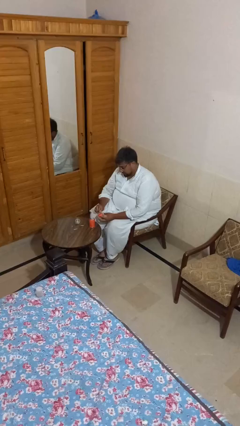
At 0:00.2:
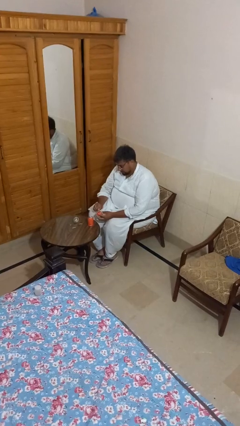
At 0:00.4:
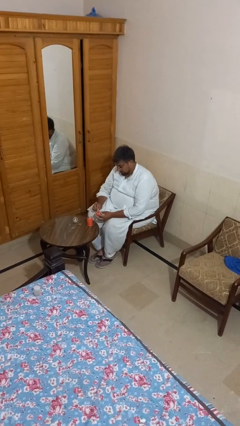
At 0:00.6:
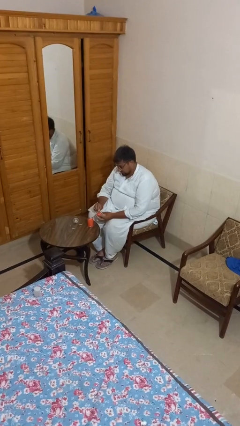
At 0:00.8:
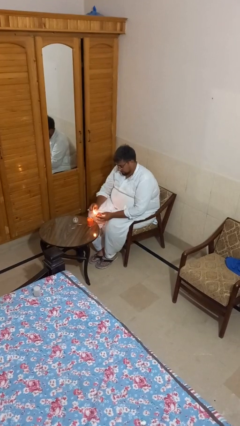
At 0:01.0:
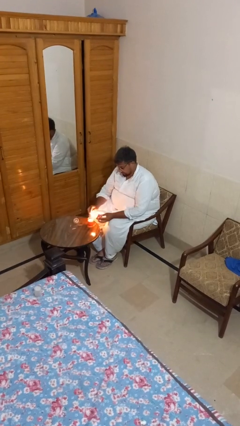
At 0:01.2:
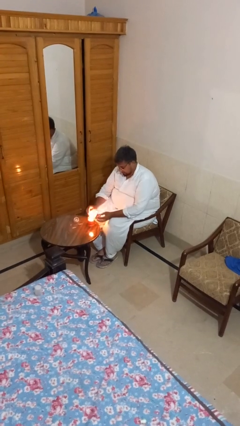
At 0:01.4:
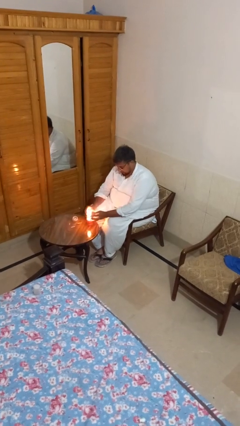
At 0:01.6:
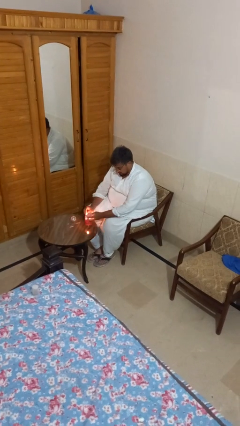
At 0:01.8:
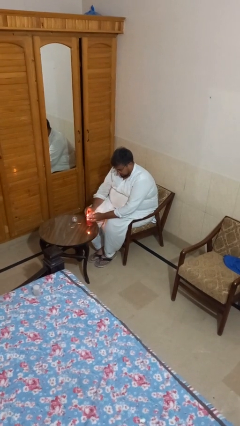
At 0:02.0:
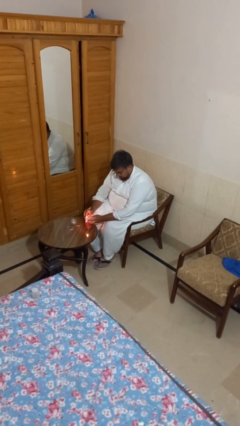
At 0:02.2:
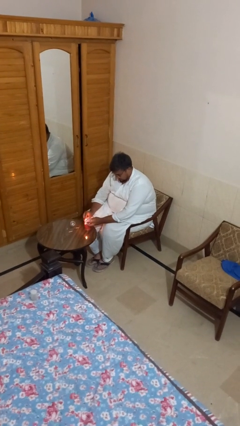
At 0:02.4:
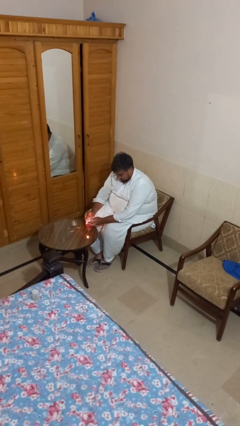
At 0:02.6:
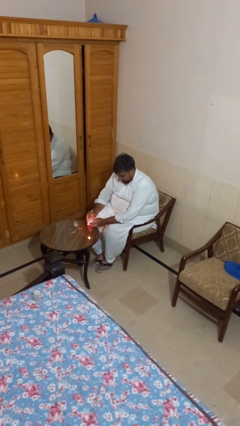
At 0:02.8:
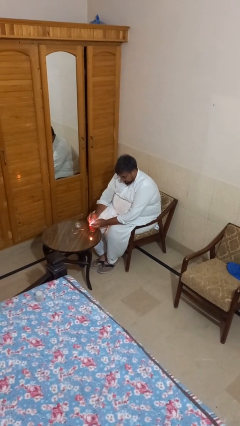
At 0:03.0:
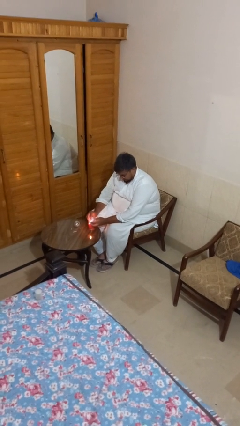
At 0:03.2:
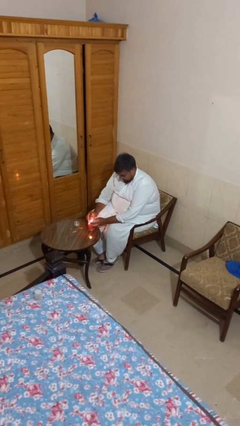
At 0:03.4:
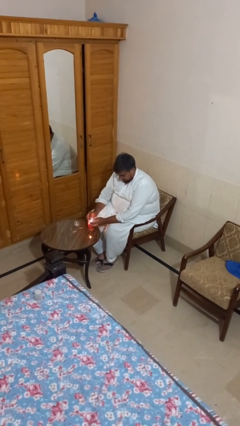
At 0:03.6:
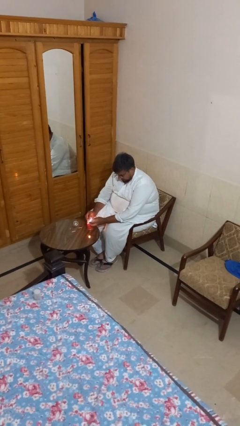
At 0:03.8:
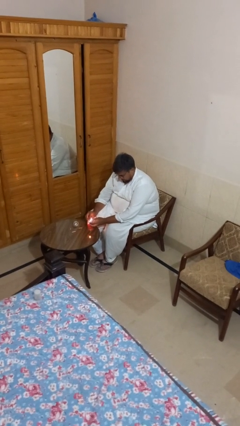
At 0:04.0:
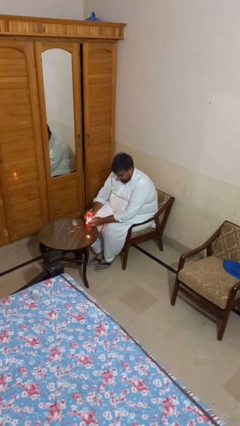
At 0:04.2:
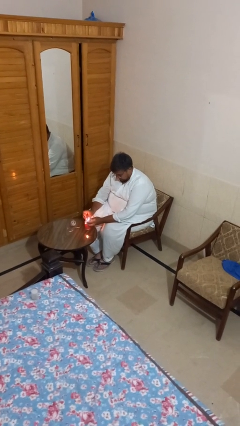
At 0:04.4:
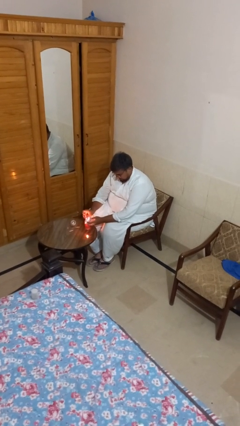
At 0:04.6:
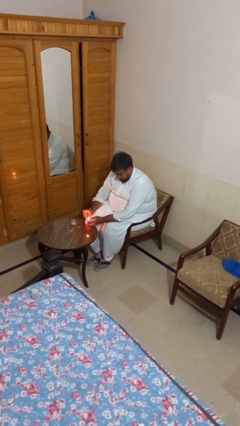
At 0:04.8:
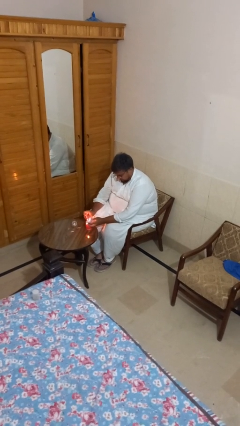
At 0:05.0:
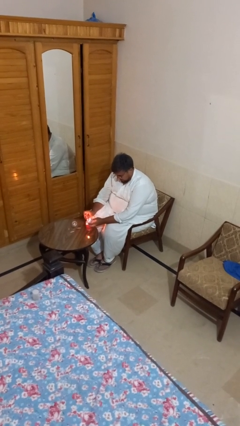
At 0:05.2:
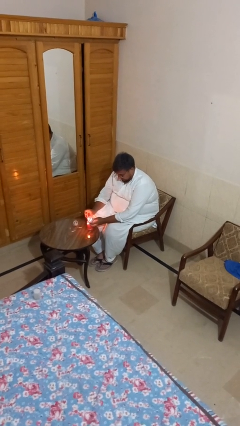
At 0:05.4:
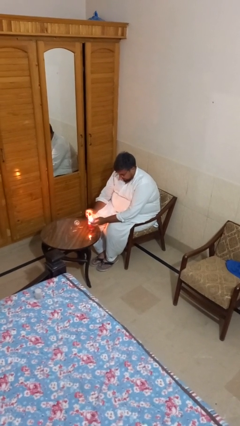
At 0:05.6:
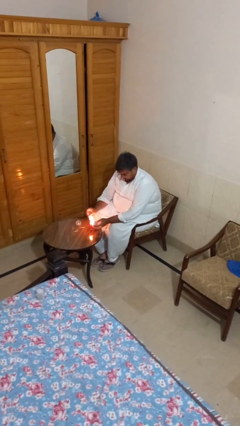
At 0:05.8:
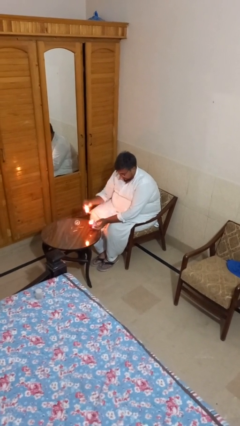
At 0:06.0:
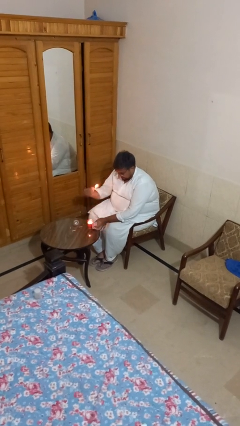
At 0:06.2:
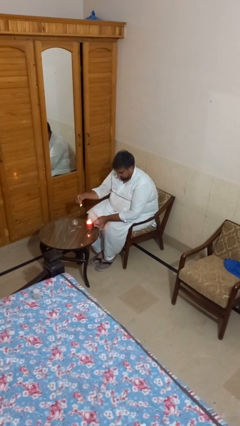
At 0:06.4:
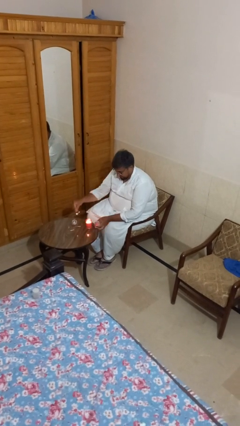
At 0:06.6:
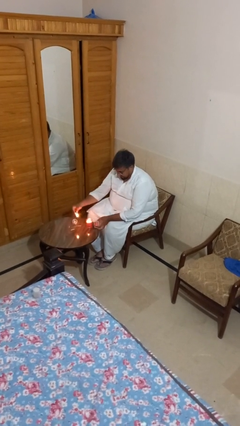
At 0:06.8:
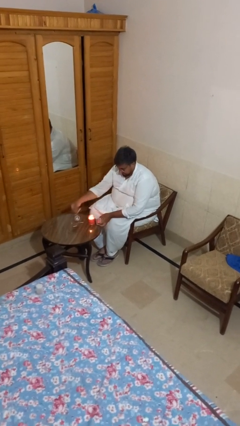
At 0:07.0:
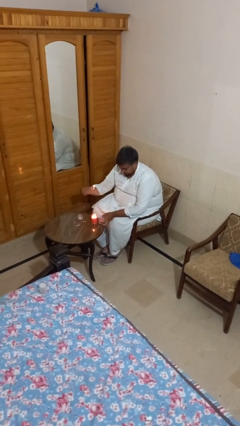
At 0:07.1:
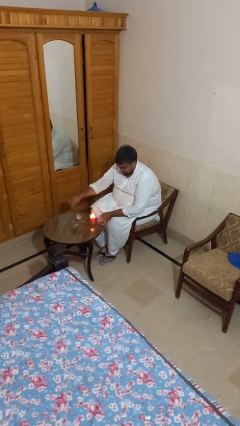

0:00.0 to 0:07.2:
person lights candle

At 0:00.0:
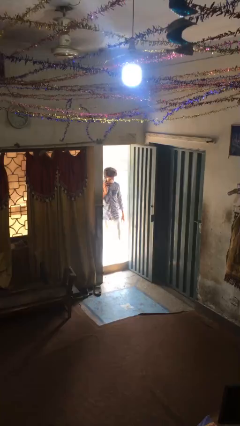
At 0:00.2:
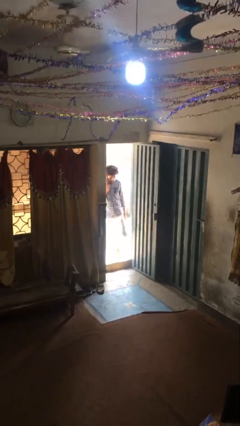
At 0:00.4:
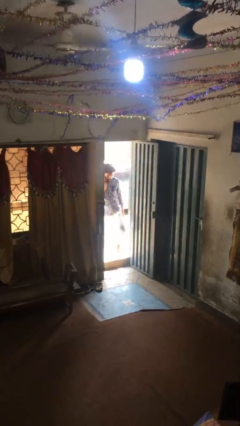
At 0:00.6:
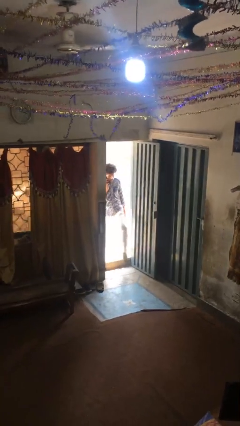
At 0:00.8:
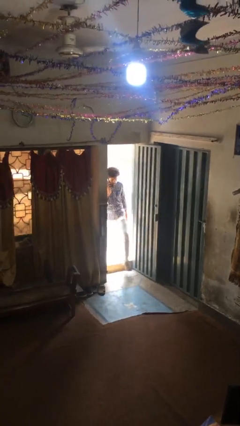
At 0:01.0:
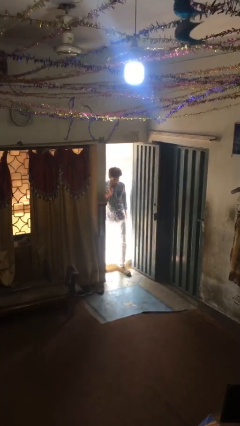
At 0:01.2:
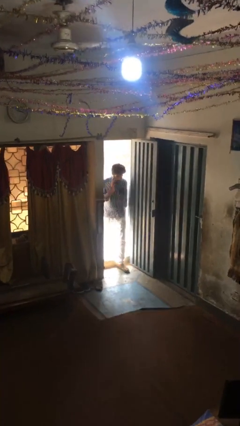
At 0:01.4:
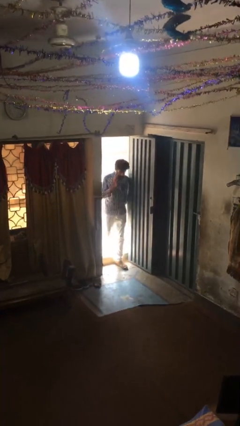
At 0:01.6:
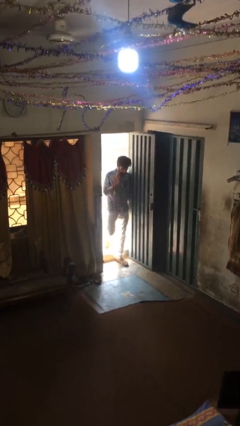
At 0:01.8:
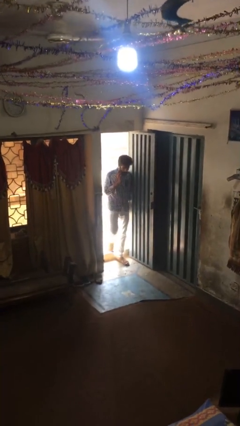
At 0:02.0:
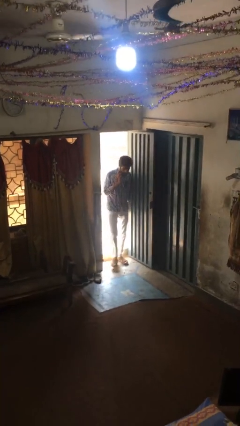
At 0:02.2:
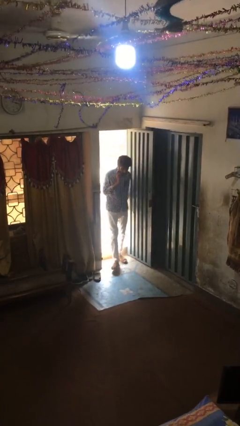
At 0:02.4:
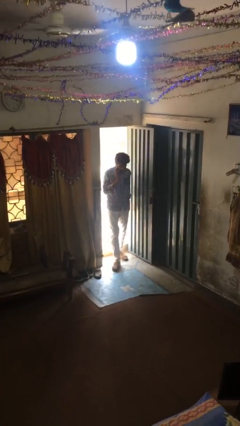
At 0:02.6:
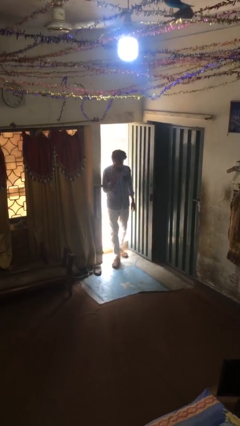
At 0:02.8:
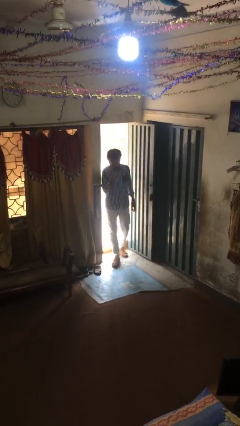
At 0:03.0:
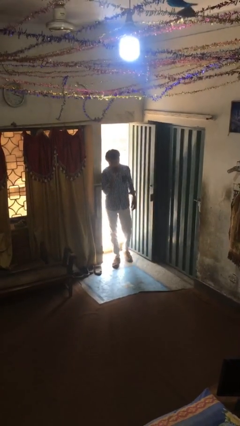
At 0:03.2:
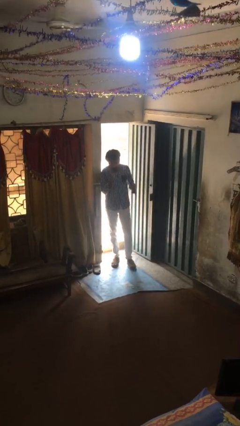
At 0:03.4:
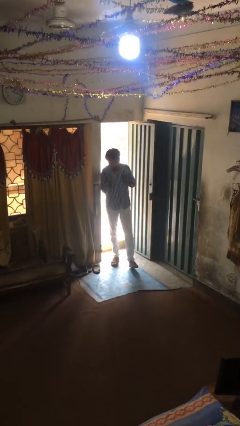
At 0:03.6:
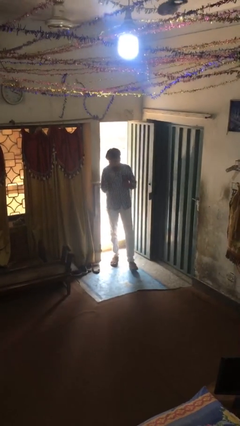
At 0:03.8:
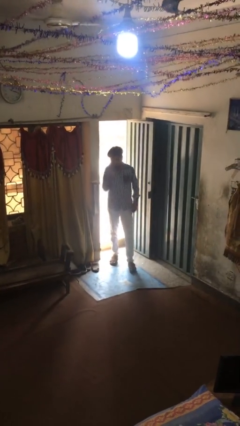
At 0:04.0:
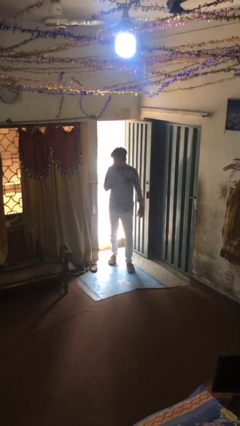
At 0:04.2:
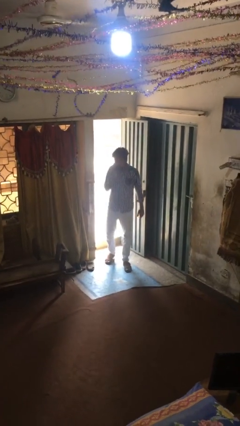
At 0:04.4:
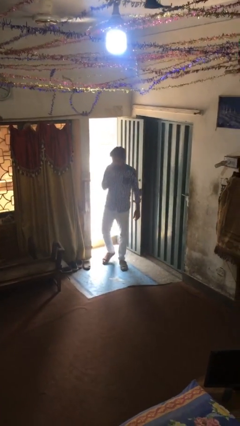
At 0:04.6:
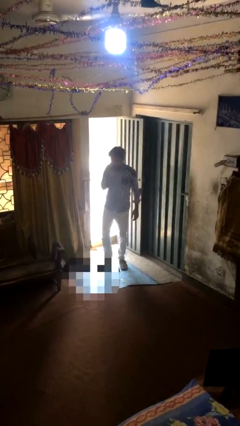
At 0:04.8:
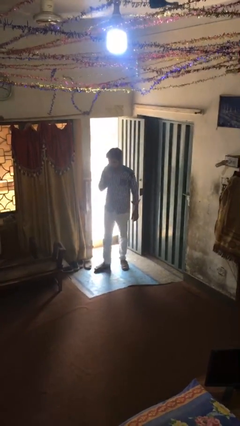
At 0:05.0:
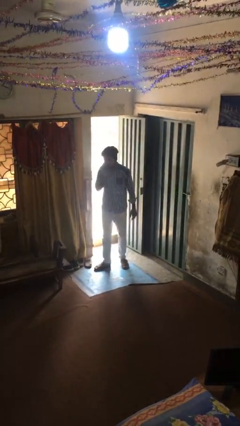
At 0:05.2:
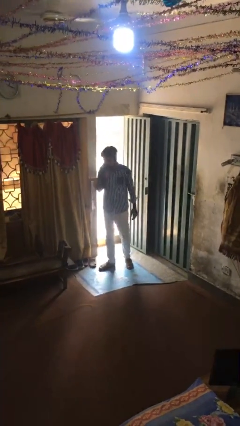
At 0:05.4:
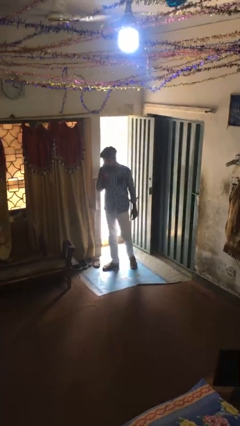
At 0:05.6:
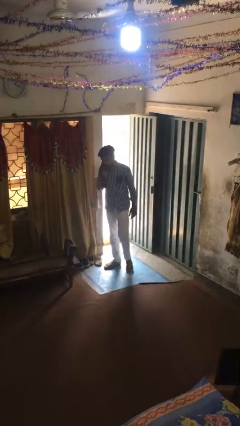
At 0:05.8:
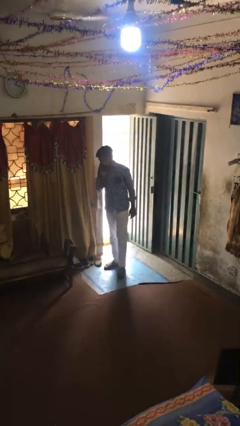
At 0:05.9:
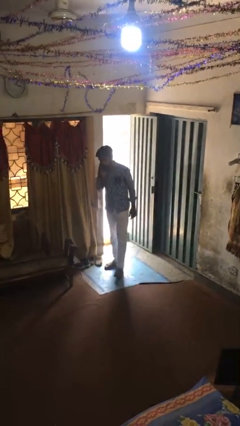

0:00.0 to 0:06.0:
person enters scene through structure

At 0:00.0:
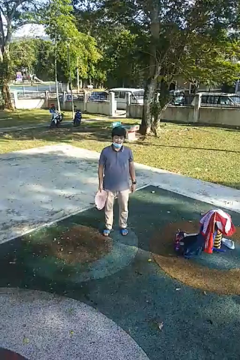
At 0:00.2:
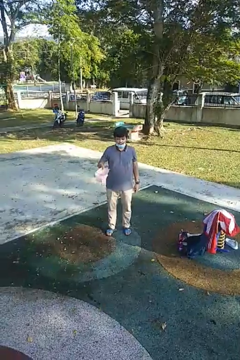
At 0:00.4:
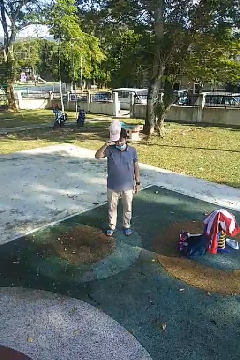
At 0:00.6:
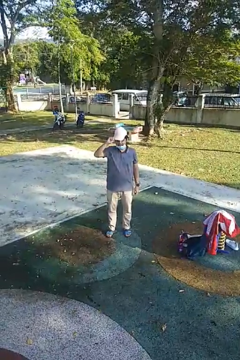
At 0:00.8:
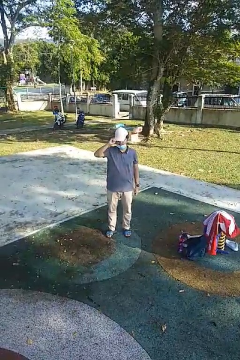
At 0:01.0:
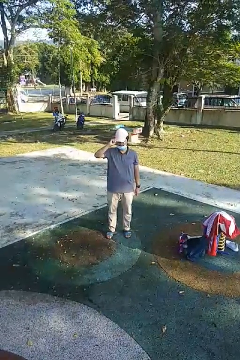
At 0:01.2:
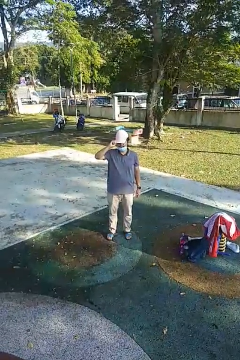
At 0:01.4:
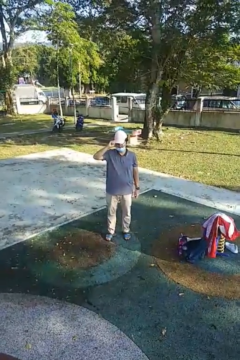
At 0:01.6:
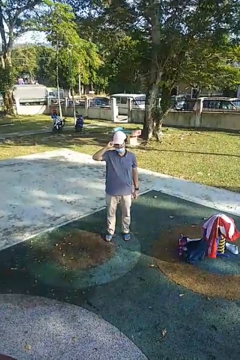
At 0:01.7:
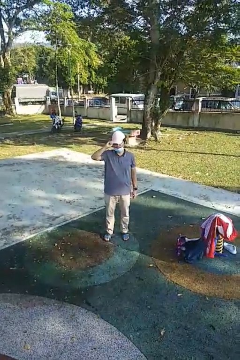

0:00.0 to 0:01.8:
person puts on hat

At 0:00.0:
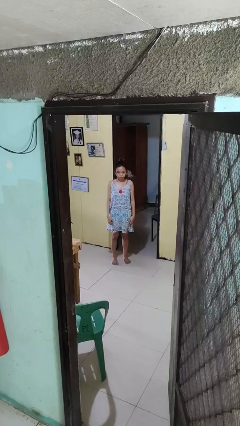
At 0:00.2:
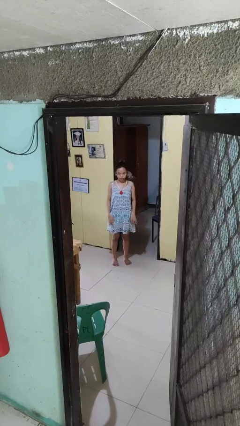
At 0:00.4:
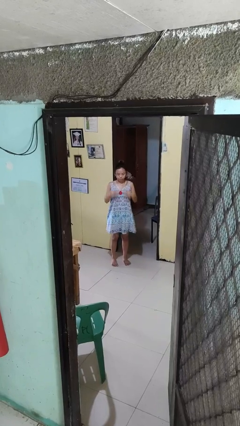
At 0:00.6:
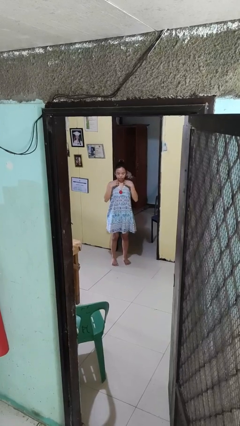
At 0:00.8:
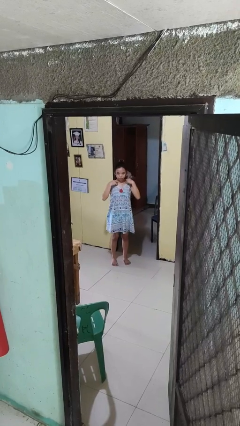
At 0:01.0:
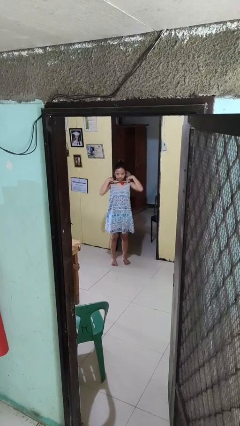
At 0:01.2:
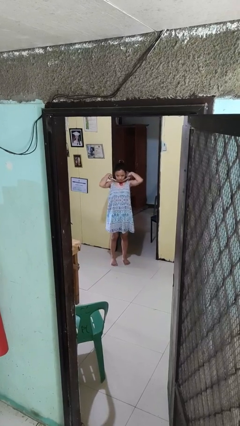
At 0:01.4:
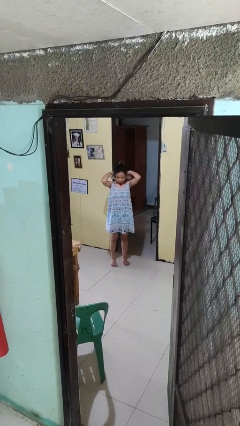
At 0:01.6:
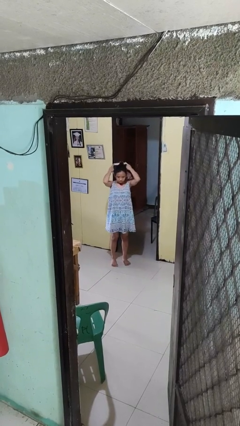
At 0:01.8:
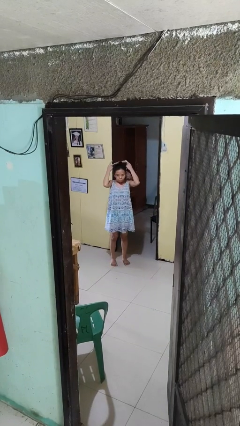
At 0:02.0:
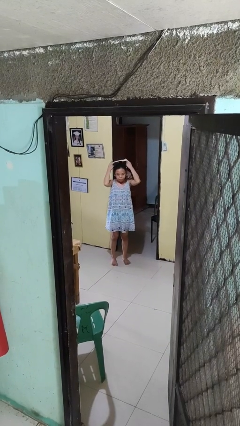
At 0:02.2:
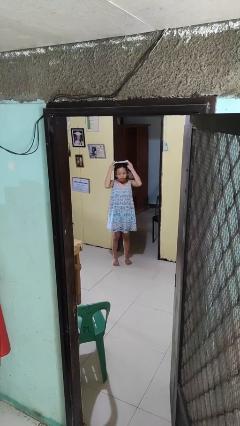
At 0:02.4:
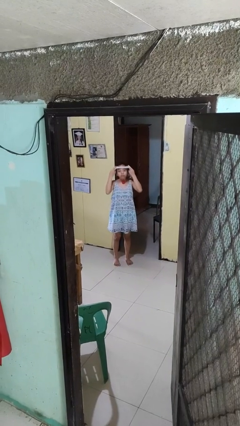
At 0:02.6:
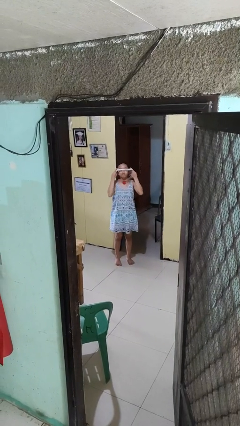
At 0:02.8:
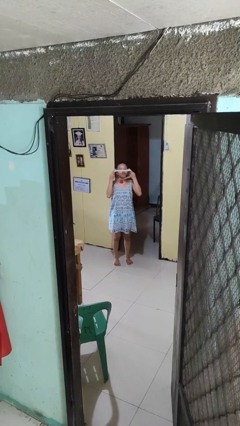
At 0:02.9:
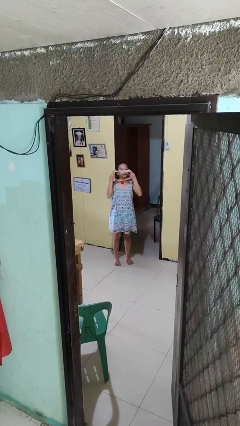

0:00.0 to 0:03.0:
person takes off necklace
